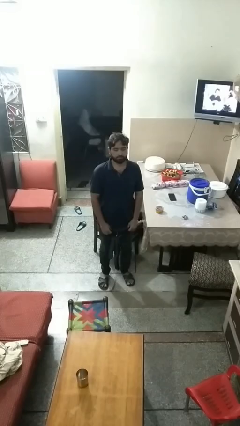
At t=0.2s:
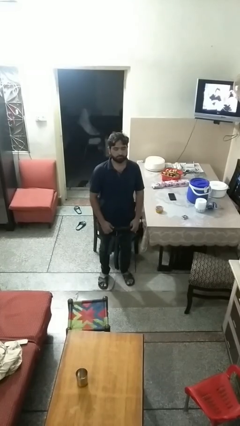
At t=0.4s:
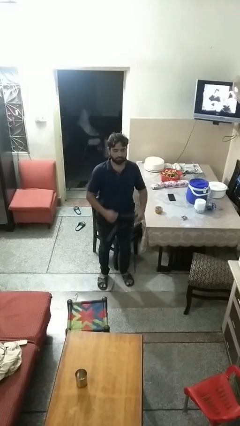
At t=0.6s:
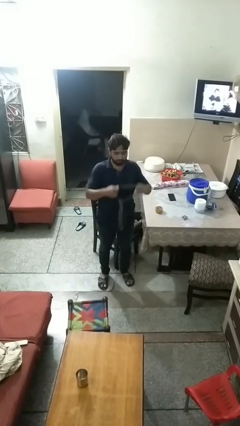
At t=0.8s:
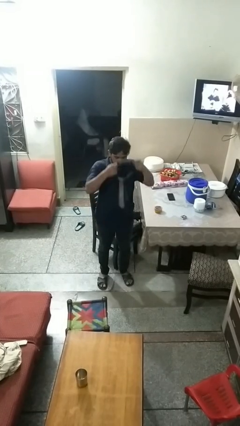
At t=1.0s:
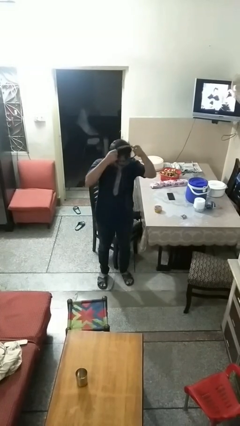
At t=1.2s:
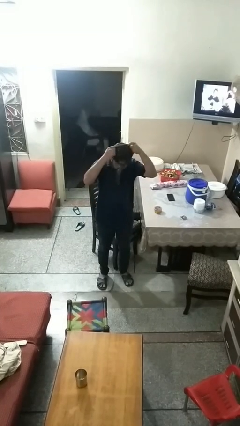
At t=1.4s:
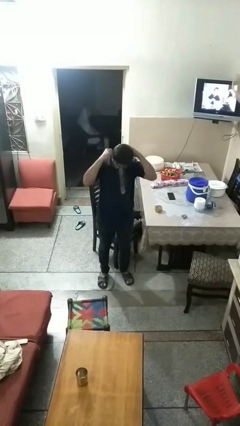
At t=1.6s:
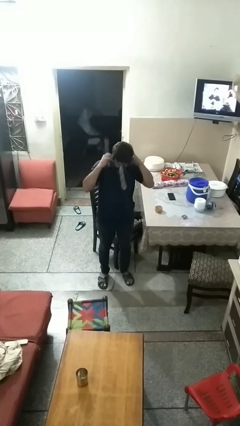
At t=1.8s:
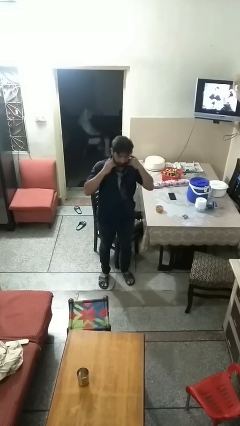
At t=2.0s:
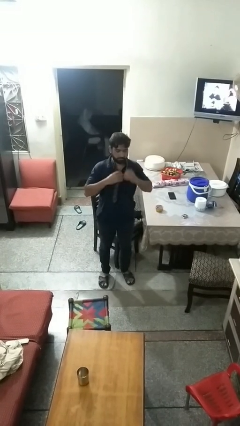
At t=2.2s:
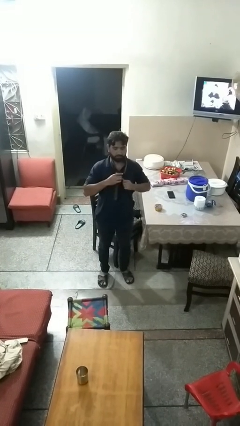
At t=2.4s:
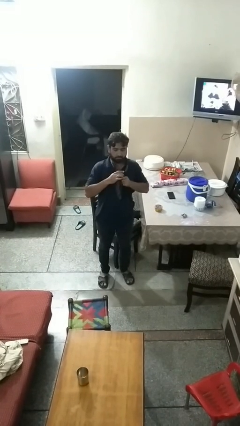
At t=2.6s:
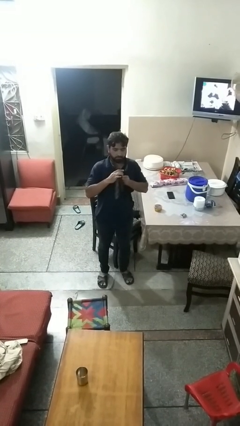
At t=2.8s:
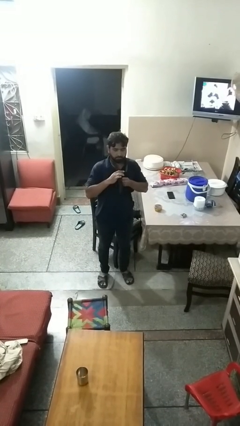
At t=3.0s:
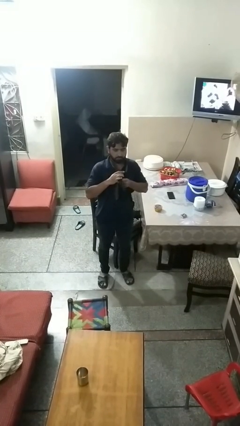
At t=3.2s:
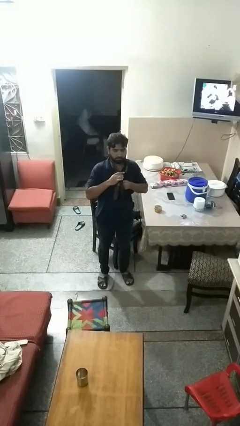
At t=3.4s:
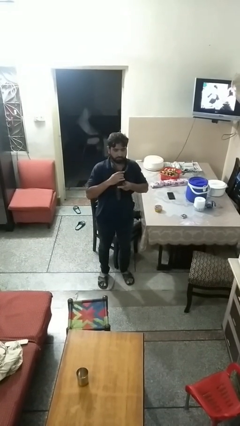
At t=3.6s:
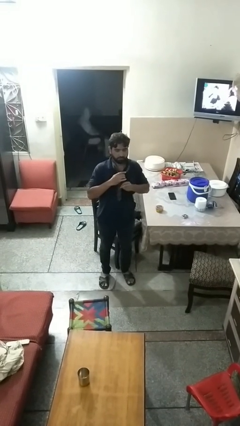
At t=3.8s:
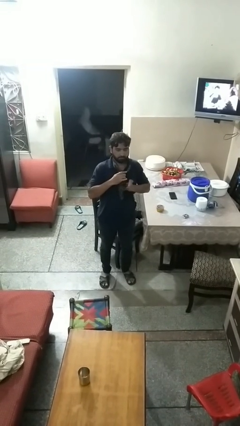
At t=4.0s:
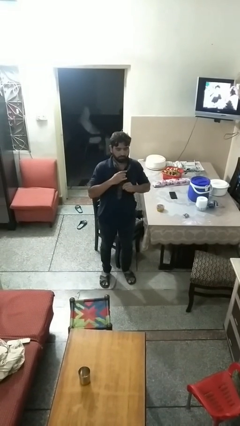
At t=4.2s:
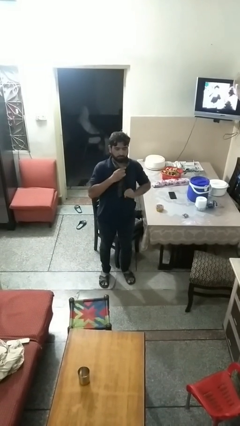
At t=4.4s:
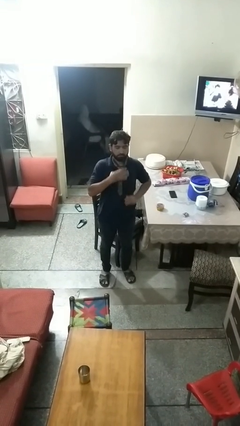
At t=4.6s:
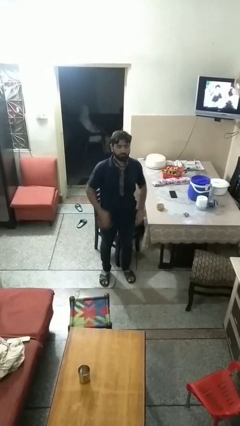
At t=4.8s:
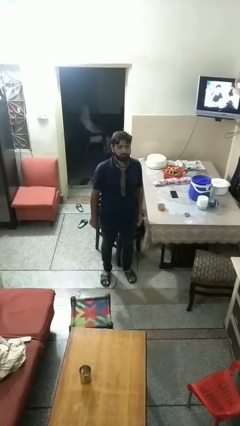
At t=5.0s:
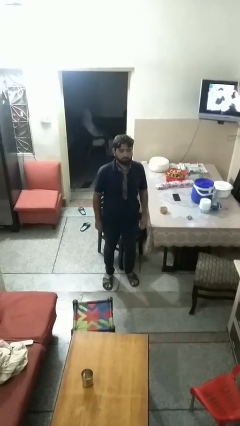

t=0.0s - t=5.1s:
person puts on necktie

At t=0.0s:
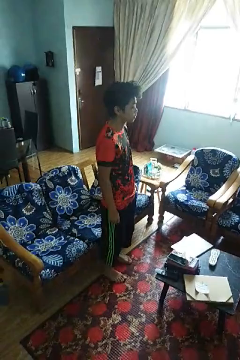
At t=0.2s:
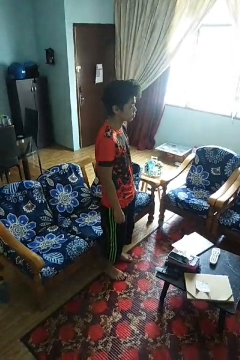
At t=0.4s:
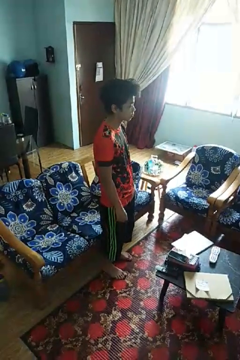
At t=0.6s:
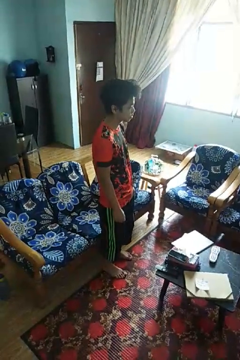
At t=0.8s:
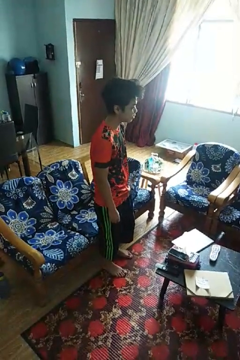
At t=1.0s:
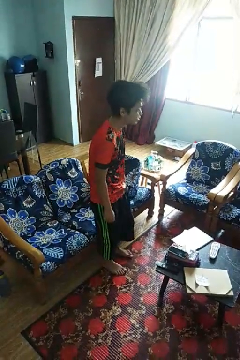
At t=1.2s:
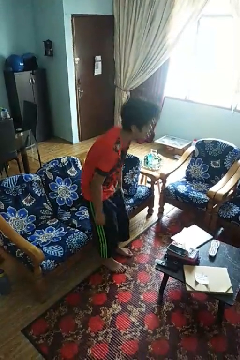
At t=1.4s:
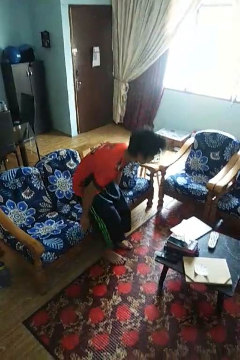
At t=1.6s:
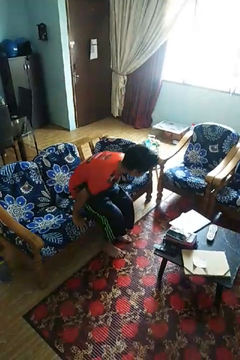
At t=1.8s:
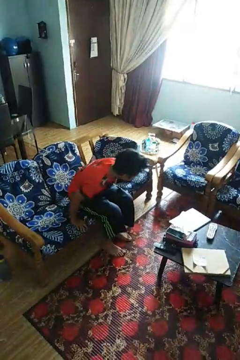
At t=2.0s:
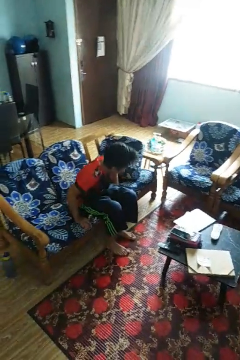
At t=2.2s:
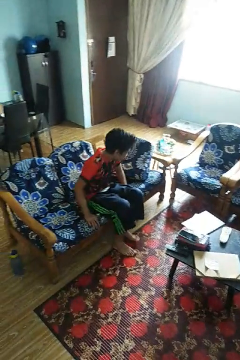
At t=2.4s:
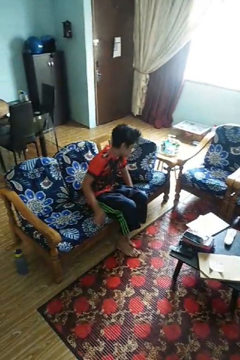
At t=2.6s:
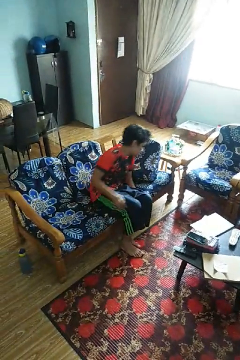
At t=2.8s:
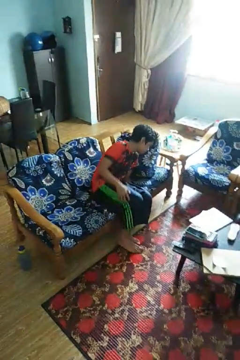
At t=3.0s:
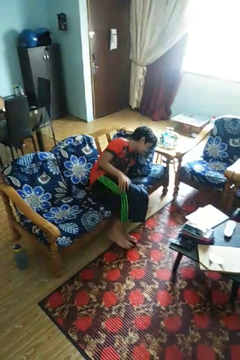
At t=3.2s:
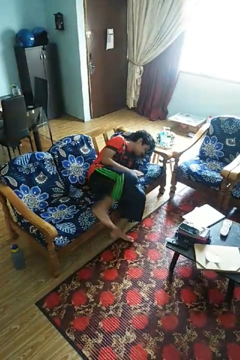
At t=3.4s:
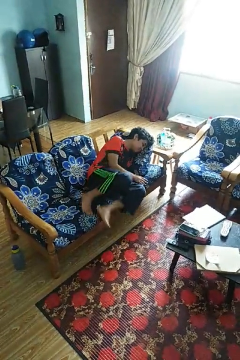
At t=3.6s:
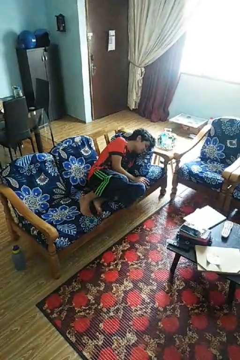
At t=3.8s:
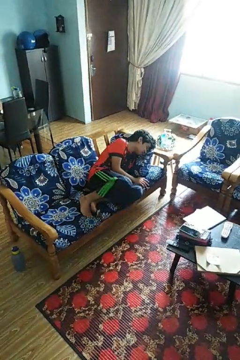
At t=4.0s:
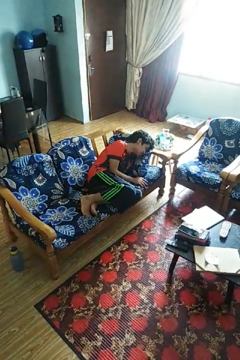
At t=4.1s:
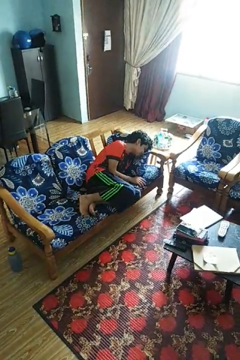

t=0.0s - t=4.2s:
person lies down on couch

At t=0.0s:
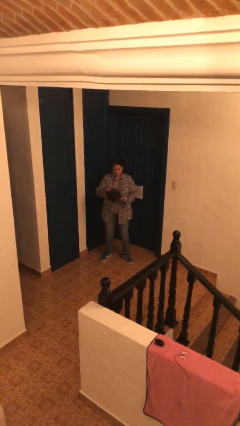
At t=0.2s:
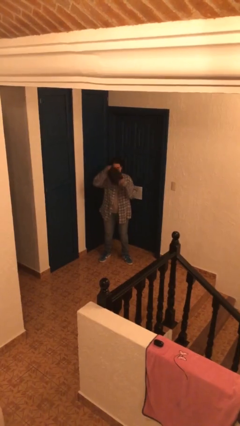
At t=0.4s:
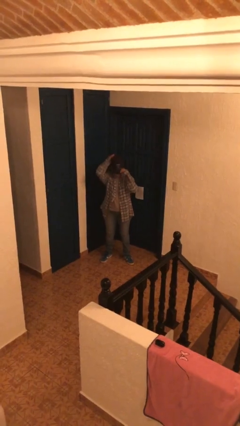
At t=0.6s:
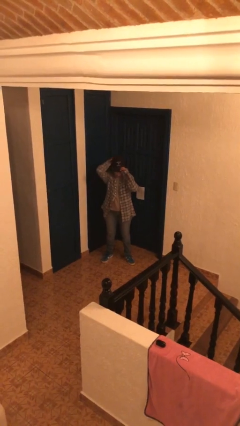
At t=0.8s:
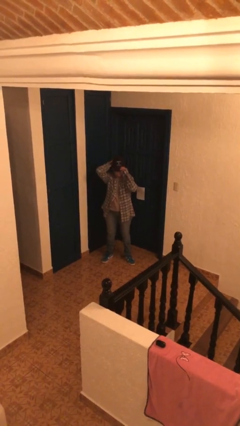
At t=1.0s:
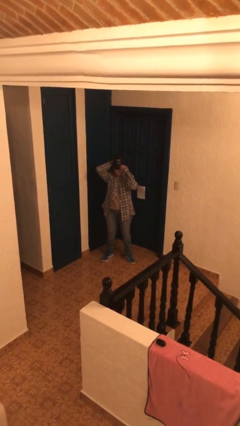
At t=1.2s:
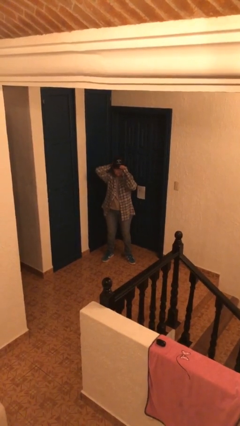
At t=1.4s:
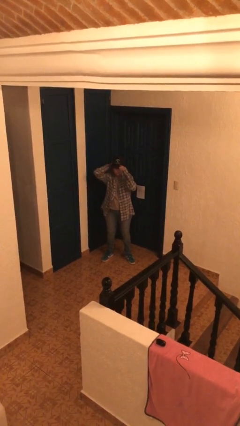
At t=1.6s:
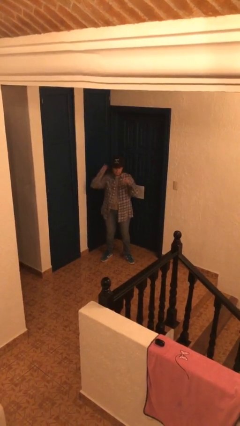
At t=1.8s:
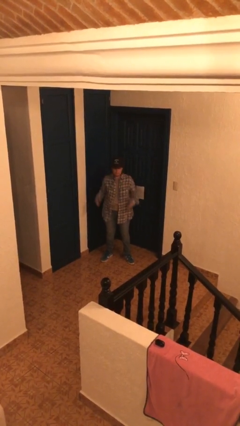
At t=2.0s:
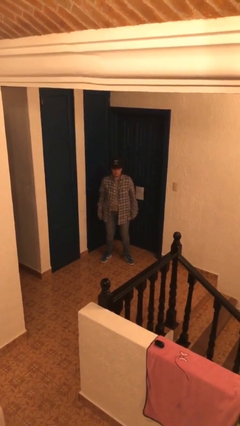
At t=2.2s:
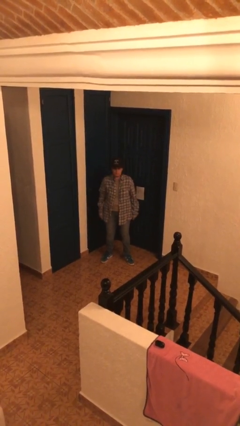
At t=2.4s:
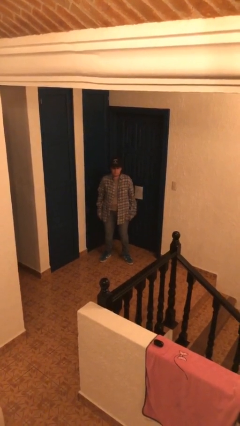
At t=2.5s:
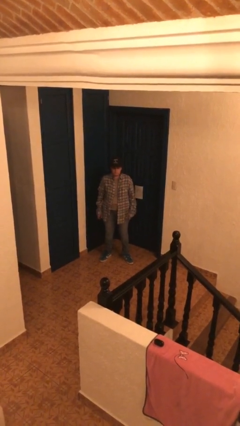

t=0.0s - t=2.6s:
person puts on hat

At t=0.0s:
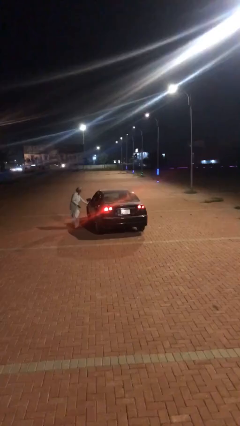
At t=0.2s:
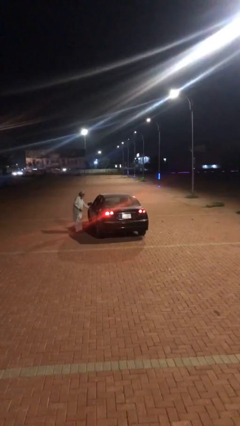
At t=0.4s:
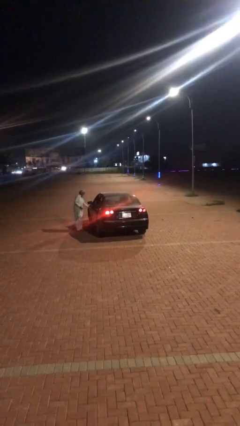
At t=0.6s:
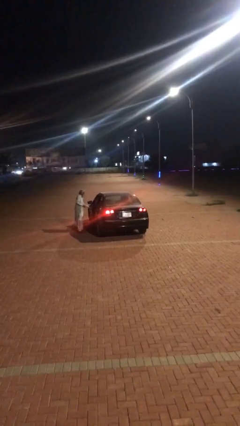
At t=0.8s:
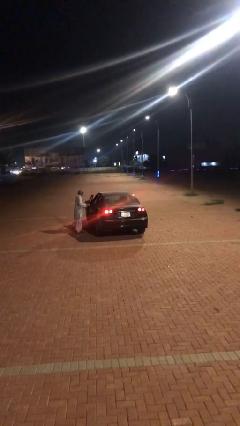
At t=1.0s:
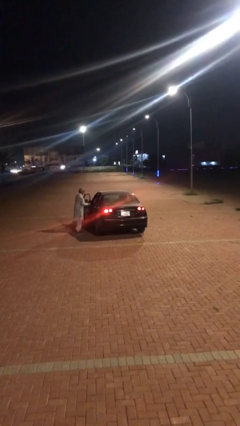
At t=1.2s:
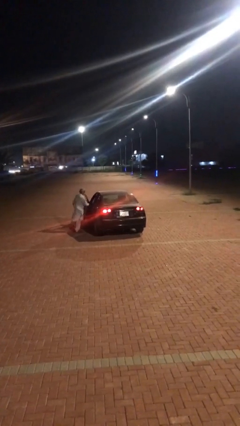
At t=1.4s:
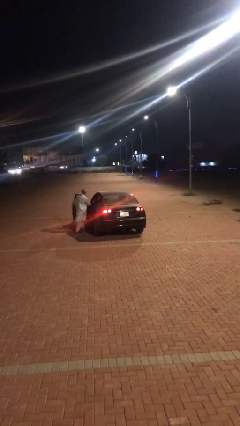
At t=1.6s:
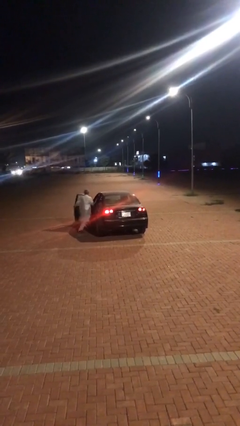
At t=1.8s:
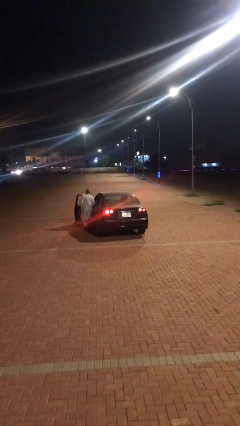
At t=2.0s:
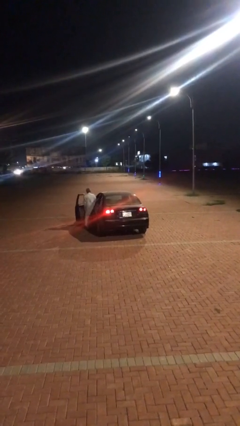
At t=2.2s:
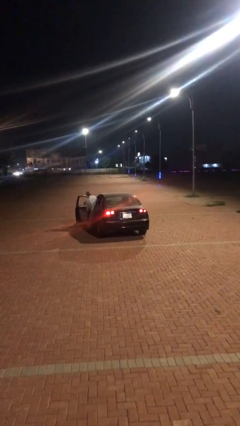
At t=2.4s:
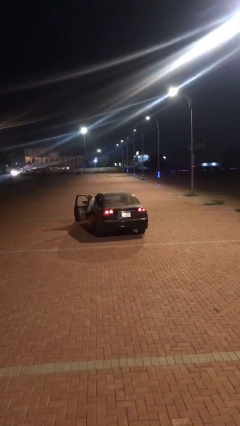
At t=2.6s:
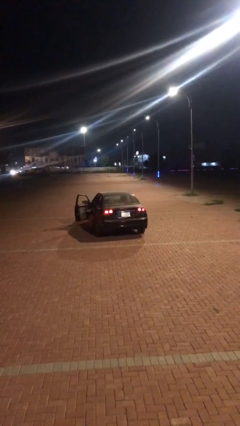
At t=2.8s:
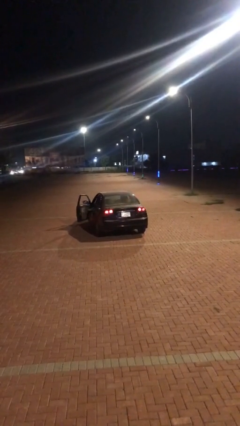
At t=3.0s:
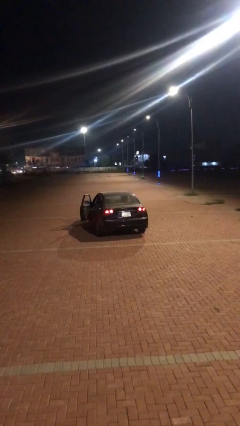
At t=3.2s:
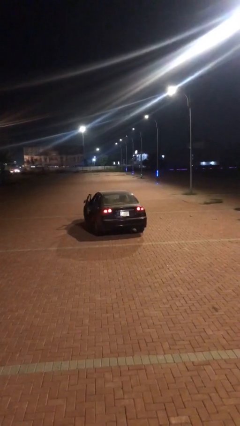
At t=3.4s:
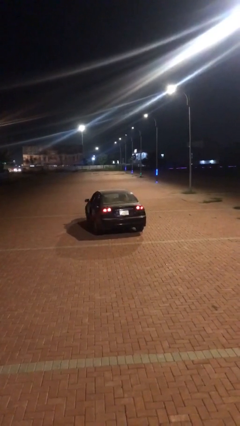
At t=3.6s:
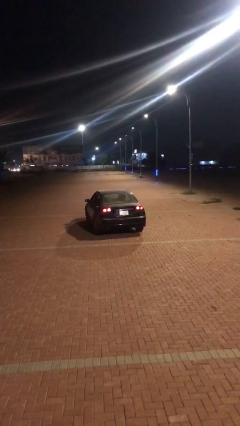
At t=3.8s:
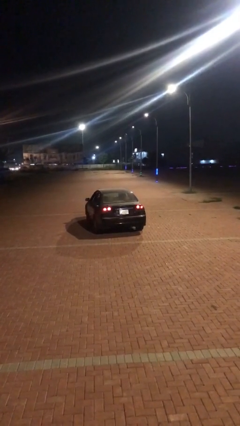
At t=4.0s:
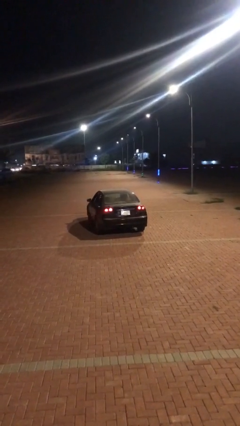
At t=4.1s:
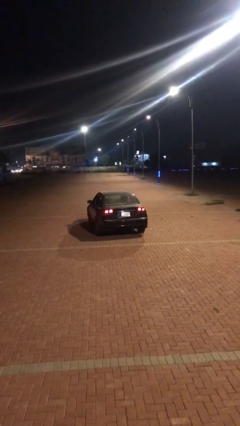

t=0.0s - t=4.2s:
car picks up person

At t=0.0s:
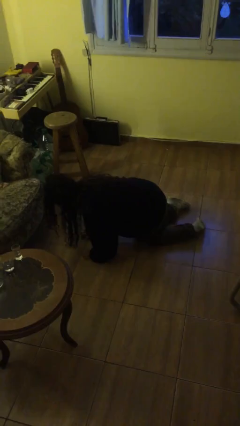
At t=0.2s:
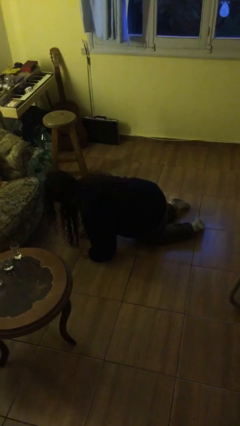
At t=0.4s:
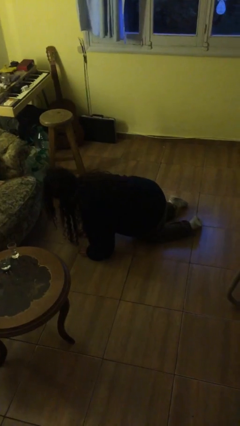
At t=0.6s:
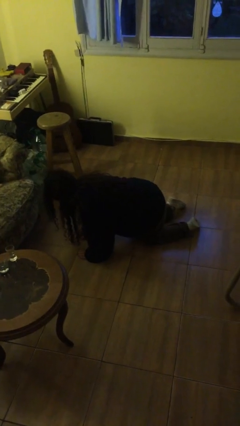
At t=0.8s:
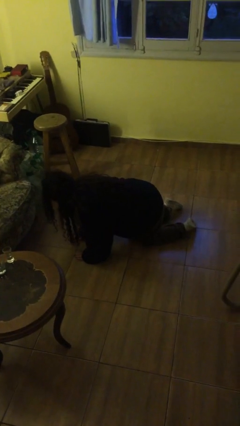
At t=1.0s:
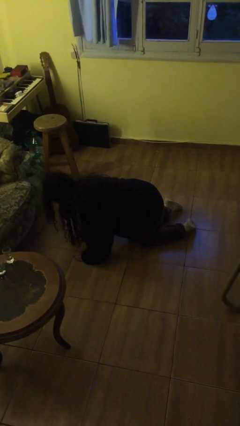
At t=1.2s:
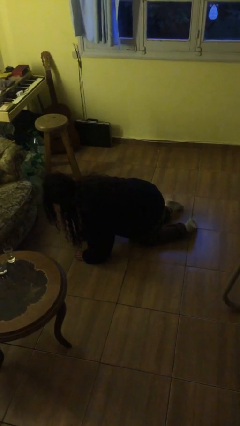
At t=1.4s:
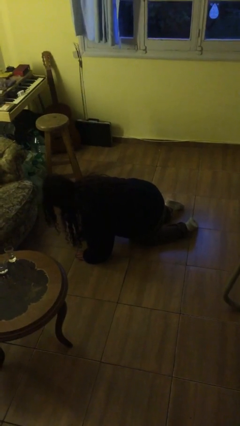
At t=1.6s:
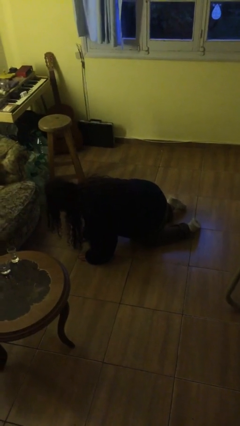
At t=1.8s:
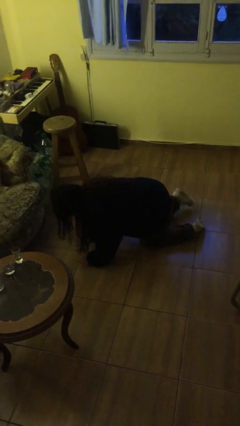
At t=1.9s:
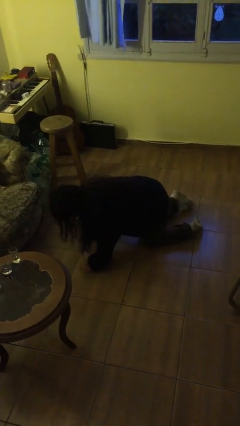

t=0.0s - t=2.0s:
person crawls
